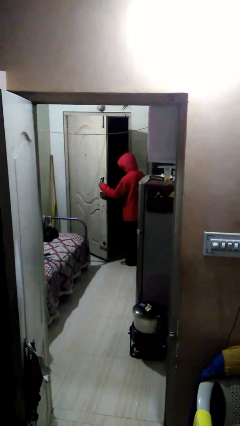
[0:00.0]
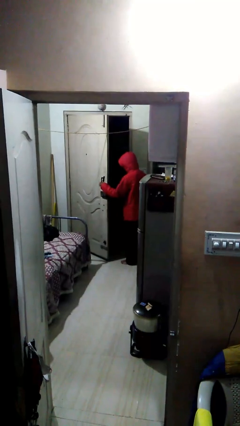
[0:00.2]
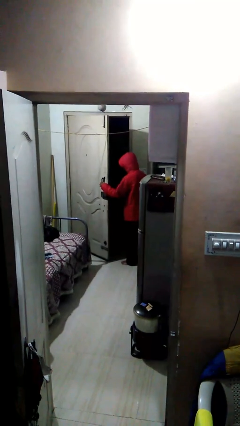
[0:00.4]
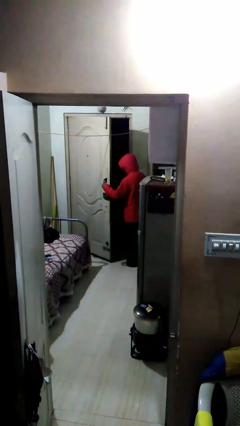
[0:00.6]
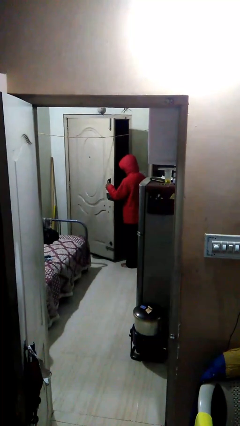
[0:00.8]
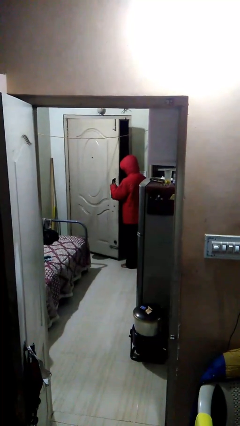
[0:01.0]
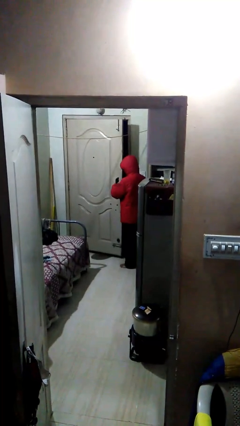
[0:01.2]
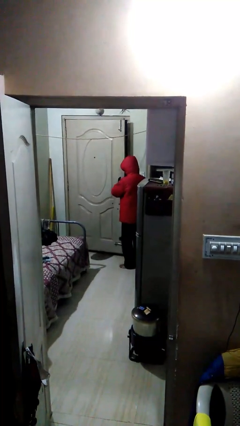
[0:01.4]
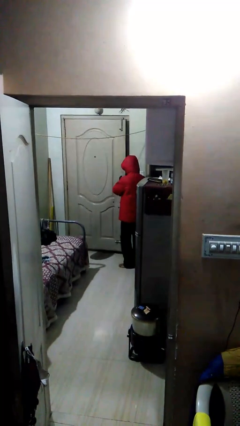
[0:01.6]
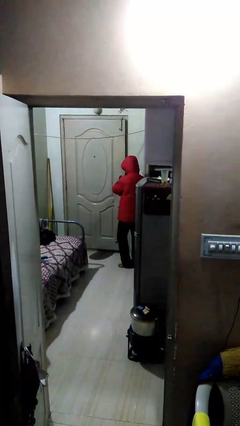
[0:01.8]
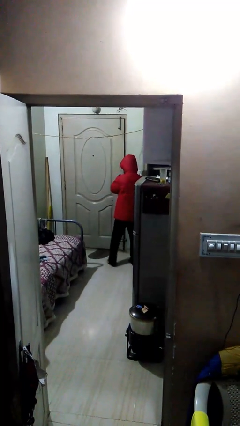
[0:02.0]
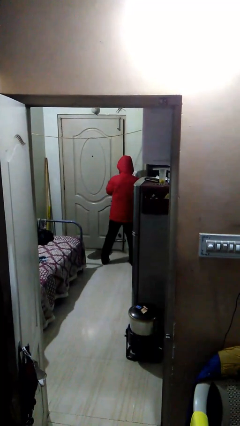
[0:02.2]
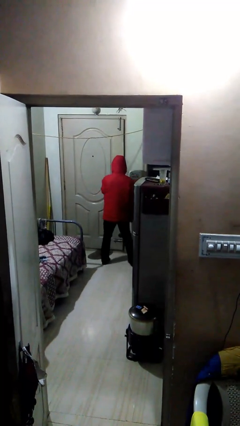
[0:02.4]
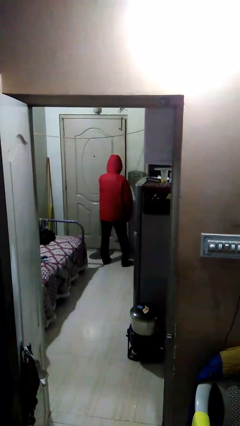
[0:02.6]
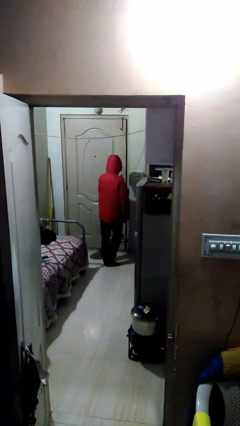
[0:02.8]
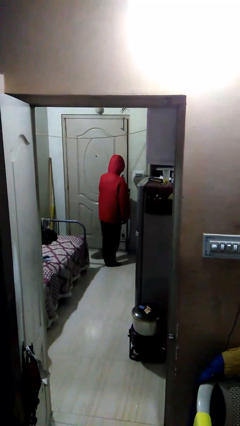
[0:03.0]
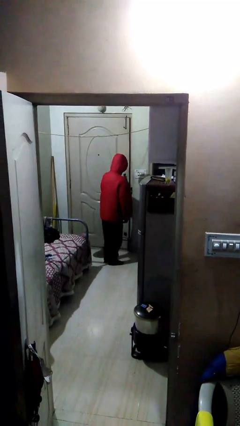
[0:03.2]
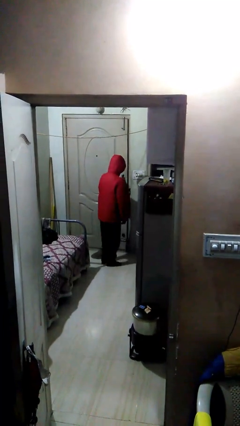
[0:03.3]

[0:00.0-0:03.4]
person closes facility door

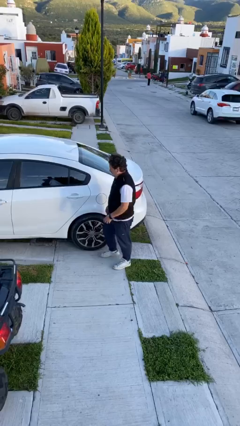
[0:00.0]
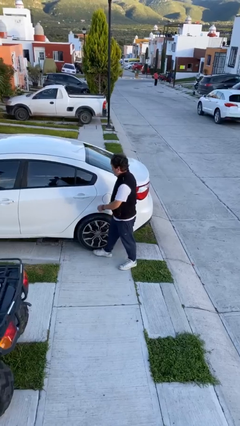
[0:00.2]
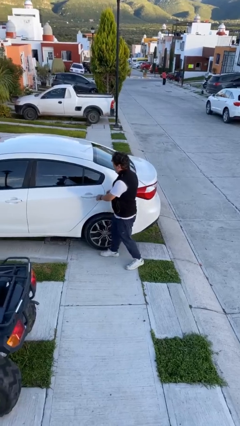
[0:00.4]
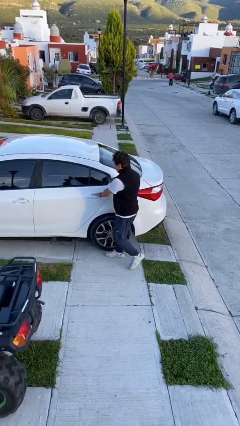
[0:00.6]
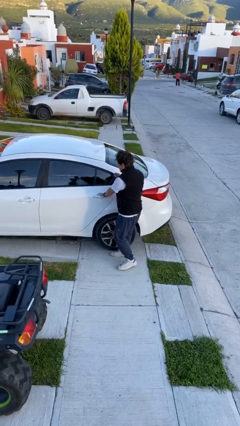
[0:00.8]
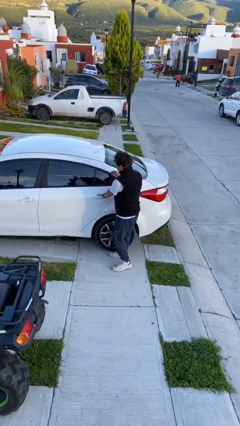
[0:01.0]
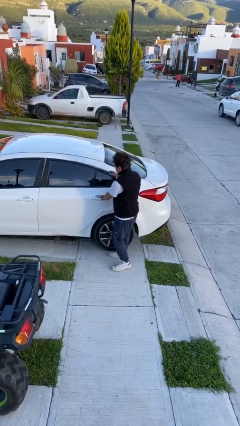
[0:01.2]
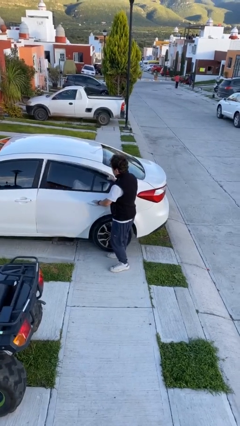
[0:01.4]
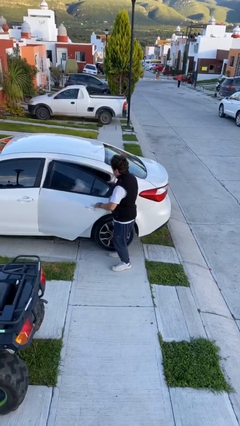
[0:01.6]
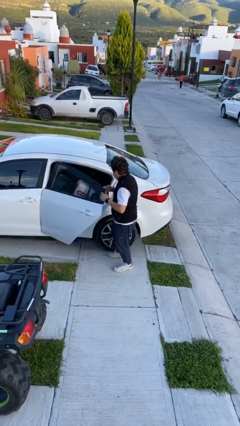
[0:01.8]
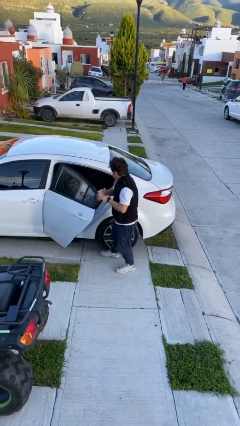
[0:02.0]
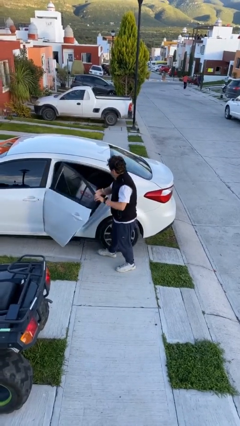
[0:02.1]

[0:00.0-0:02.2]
person opens car door

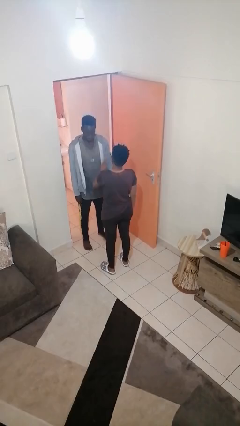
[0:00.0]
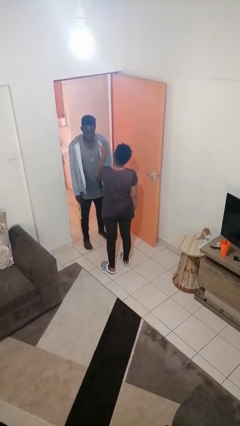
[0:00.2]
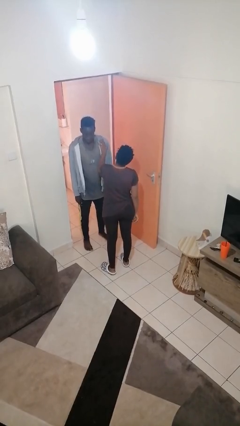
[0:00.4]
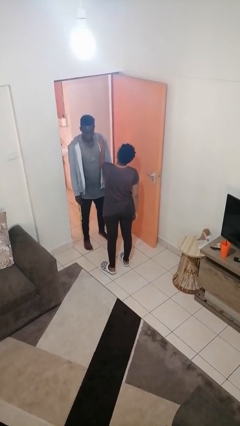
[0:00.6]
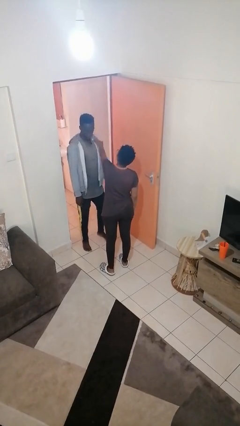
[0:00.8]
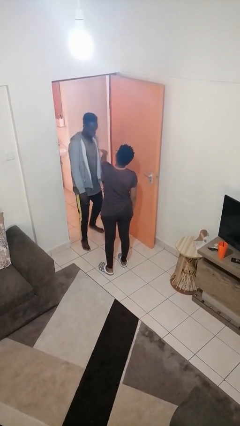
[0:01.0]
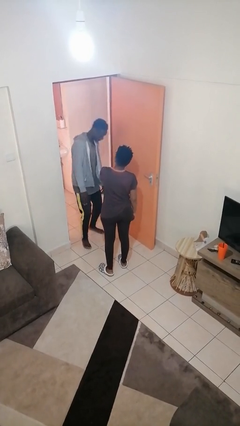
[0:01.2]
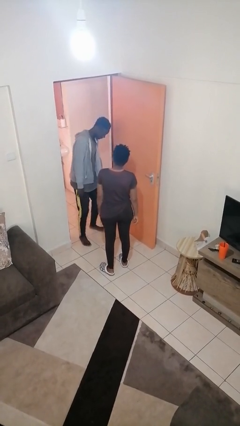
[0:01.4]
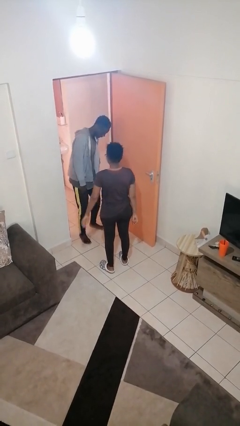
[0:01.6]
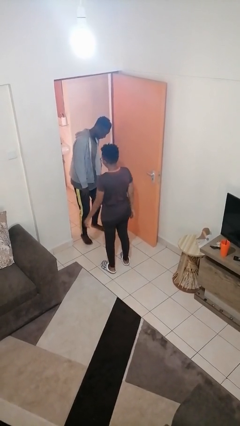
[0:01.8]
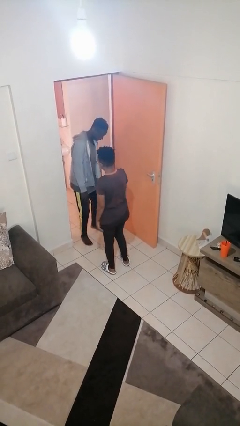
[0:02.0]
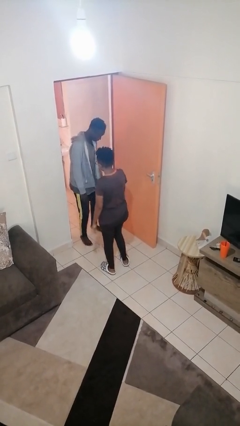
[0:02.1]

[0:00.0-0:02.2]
person shoves person

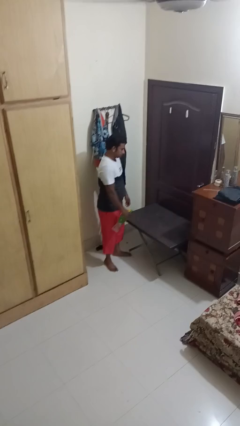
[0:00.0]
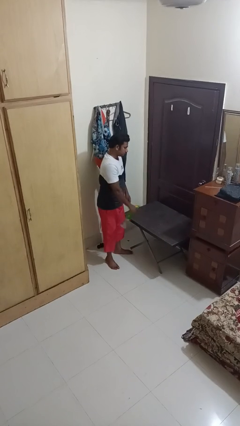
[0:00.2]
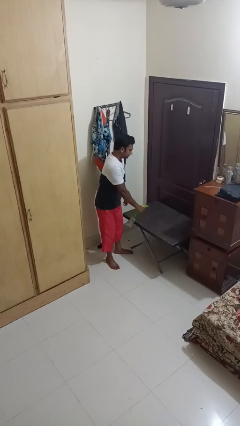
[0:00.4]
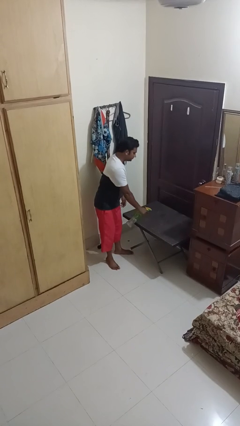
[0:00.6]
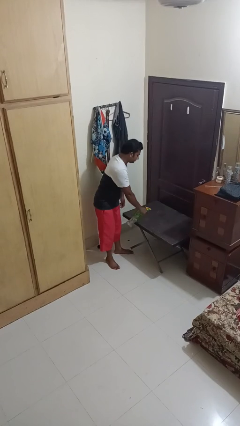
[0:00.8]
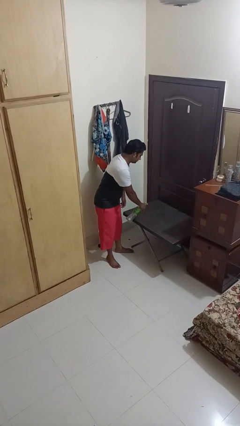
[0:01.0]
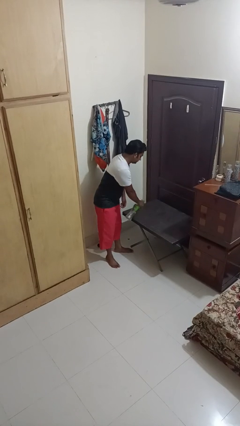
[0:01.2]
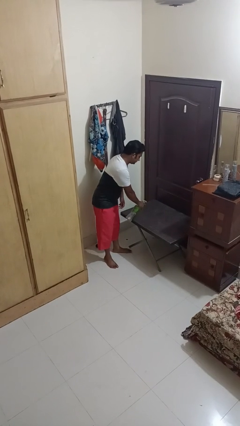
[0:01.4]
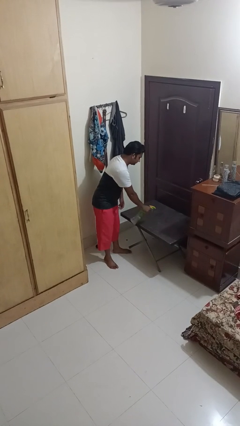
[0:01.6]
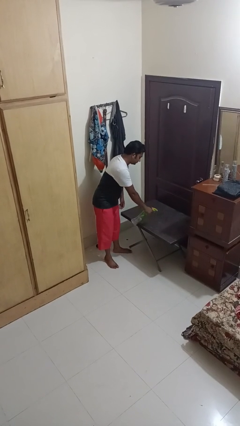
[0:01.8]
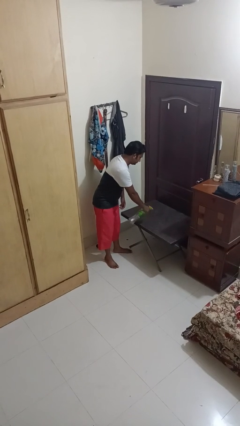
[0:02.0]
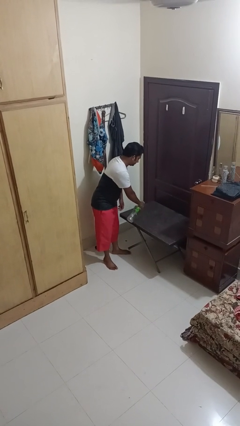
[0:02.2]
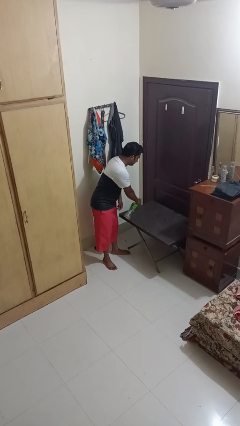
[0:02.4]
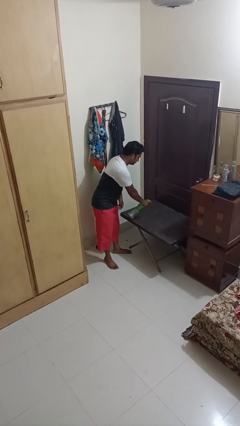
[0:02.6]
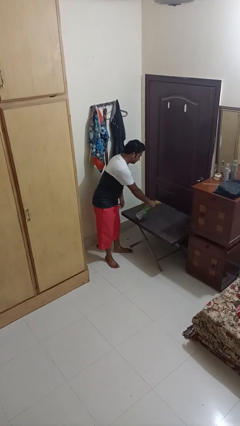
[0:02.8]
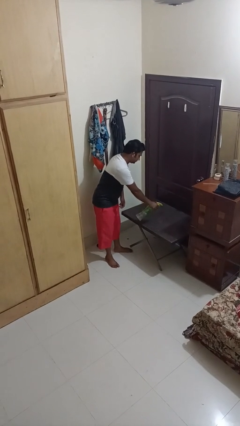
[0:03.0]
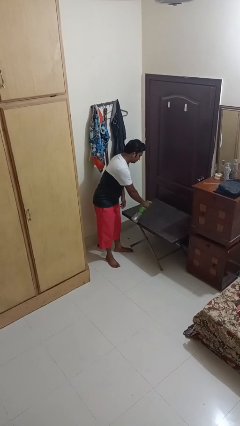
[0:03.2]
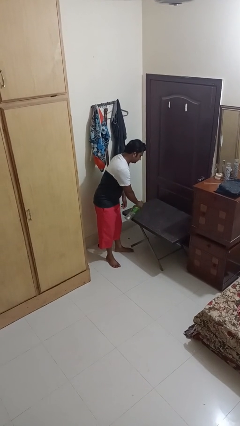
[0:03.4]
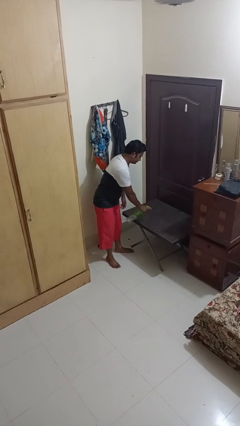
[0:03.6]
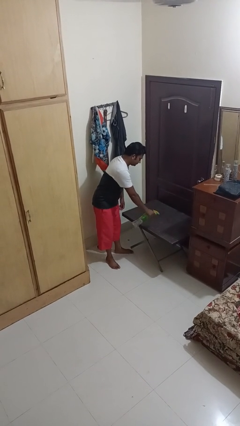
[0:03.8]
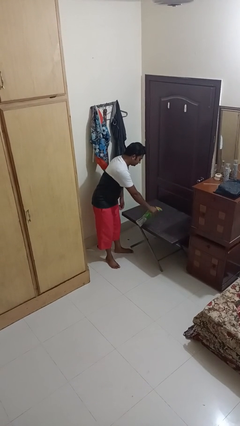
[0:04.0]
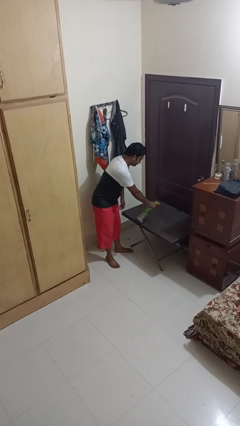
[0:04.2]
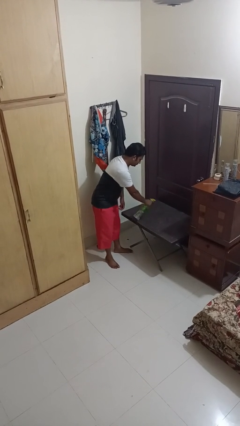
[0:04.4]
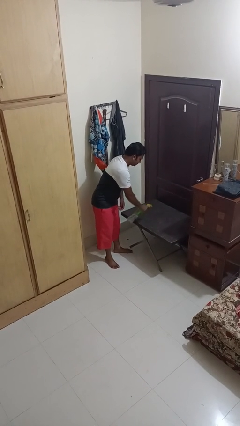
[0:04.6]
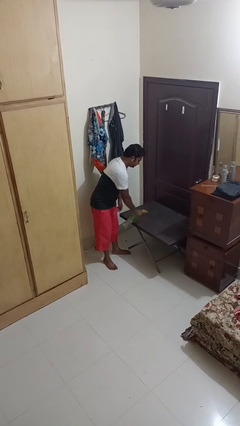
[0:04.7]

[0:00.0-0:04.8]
person sprays from bottle

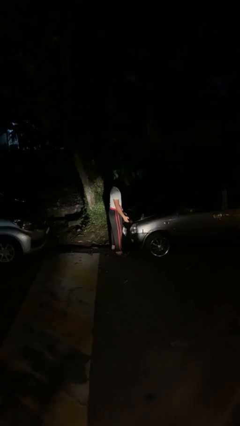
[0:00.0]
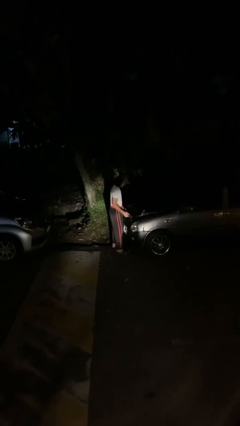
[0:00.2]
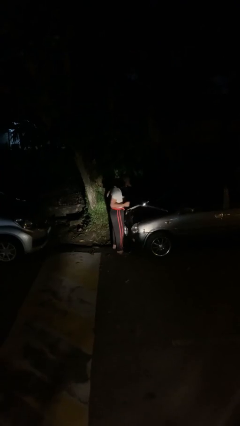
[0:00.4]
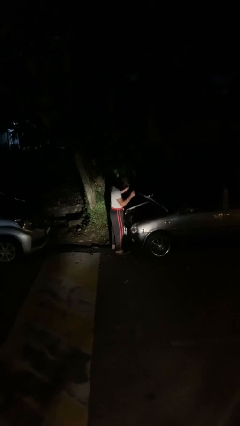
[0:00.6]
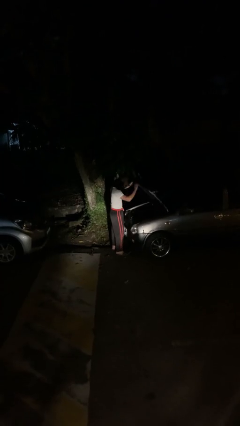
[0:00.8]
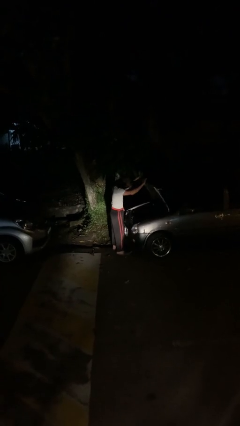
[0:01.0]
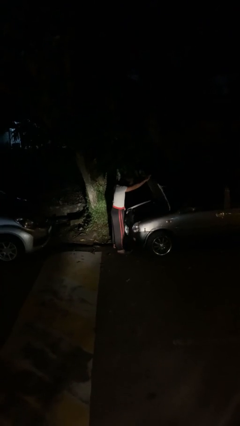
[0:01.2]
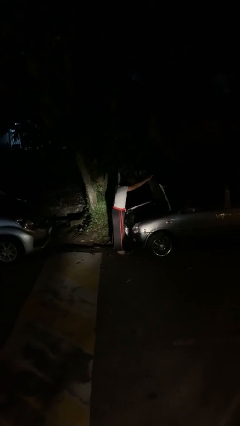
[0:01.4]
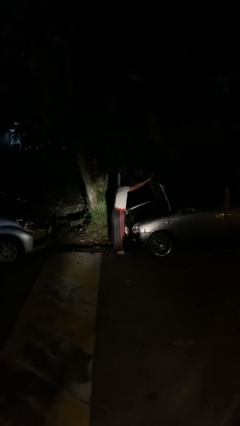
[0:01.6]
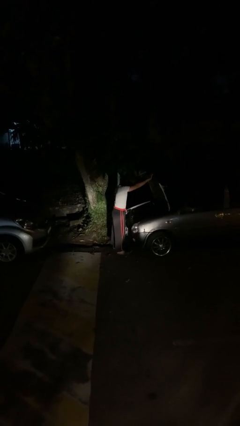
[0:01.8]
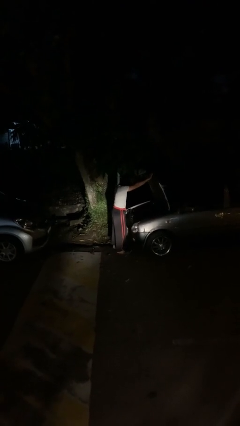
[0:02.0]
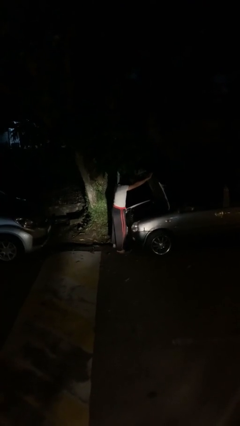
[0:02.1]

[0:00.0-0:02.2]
person opens car hood

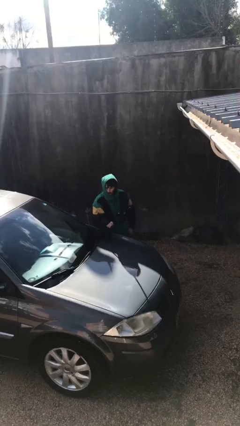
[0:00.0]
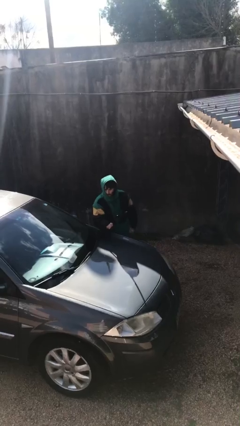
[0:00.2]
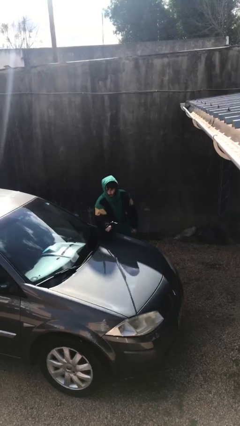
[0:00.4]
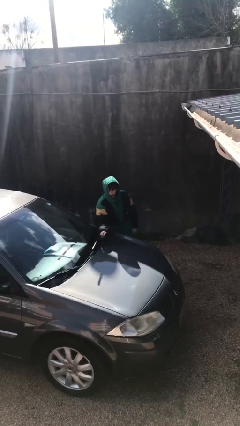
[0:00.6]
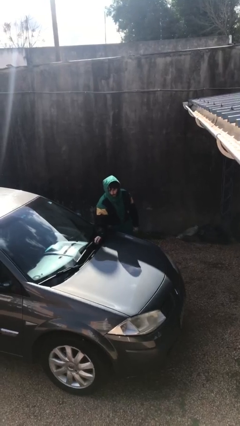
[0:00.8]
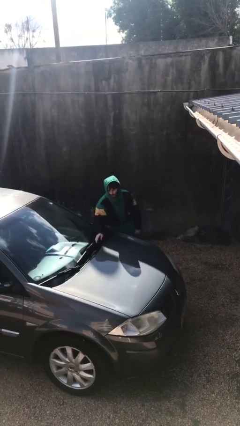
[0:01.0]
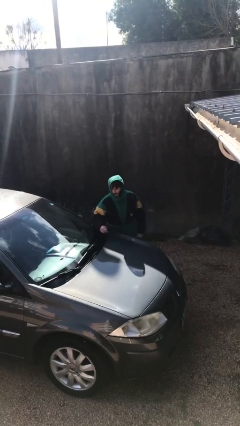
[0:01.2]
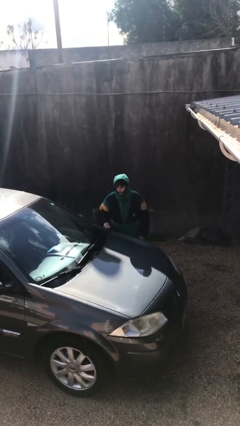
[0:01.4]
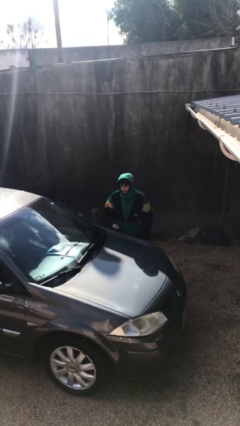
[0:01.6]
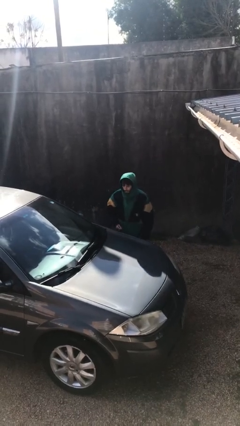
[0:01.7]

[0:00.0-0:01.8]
person flips down car wipers

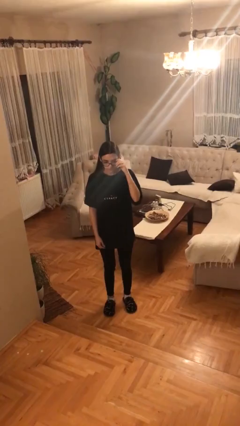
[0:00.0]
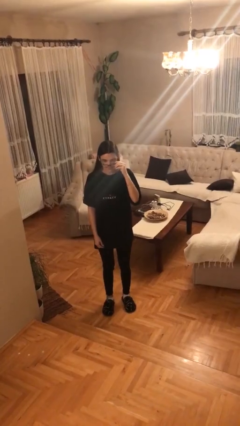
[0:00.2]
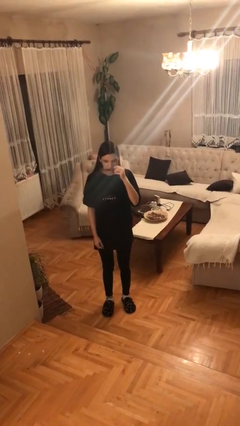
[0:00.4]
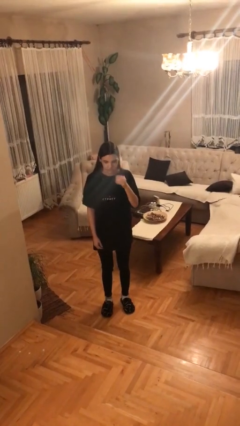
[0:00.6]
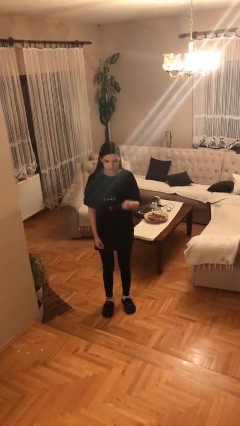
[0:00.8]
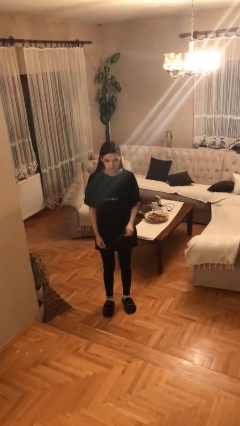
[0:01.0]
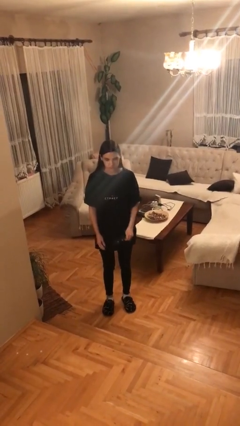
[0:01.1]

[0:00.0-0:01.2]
person takes off glasses
